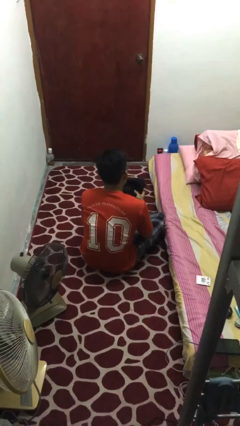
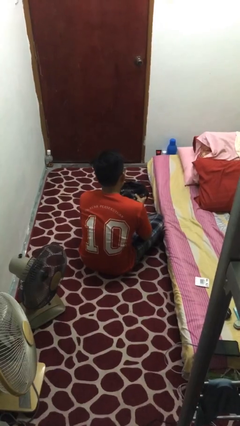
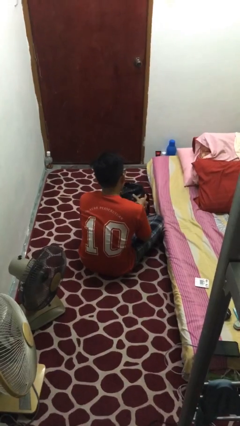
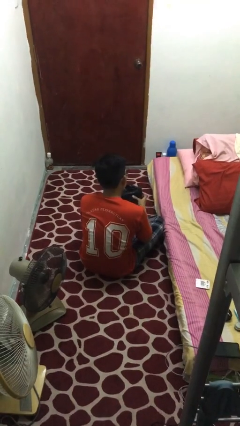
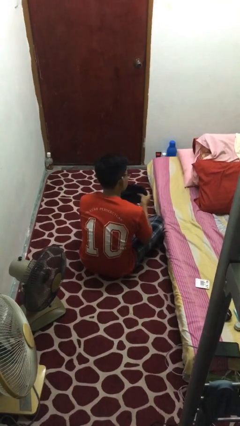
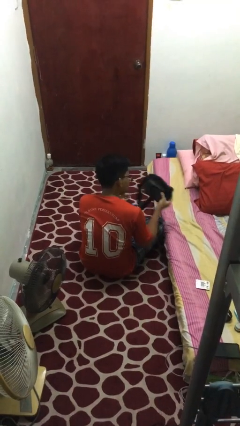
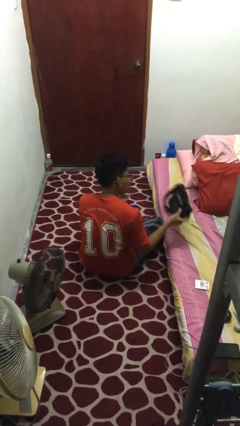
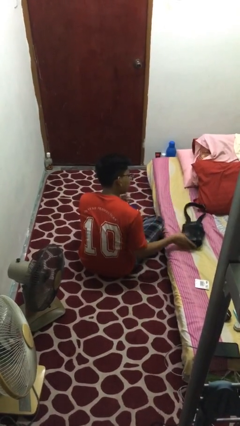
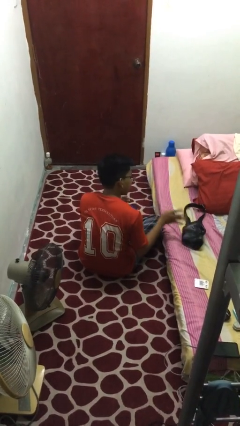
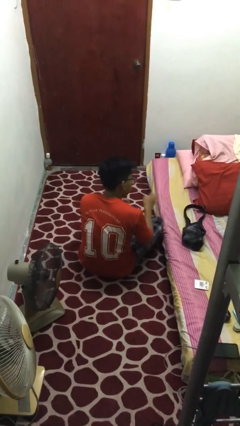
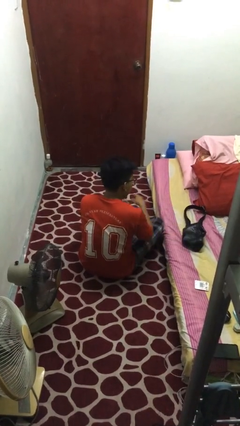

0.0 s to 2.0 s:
person puts down object on bed

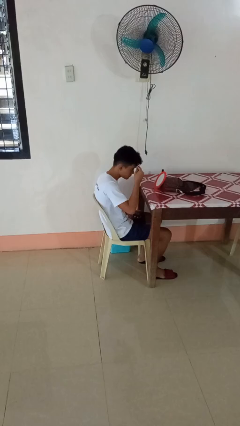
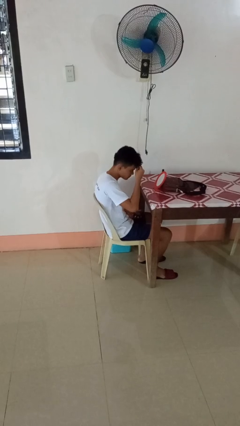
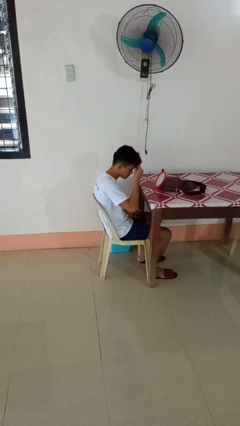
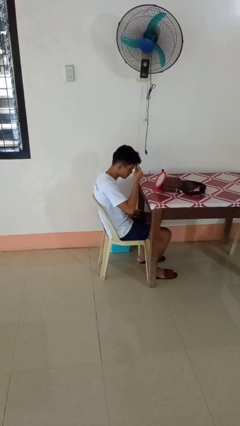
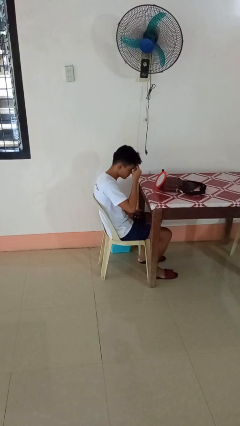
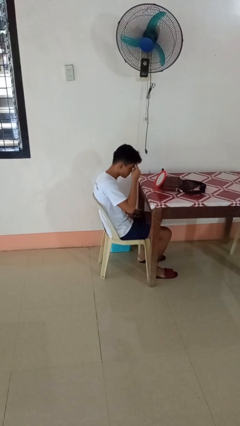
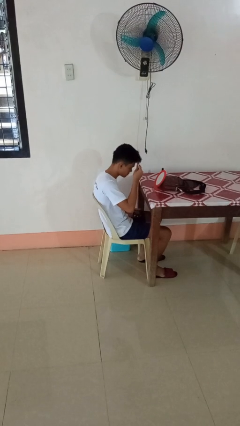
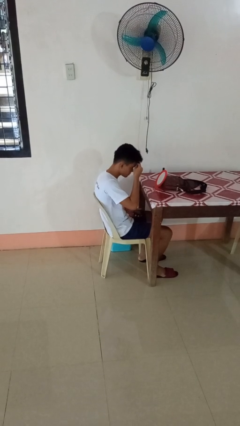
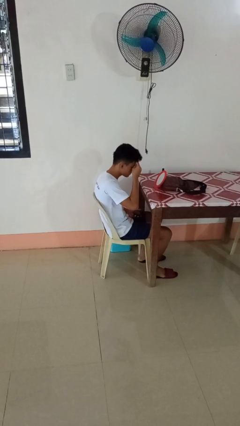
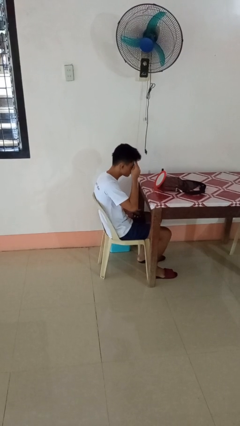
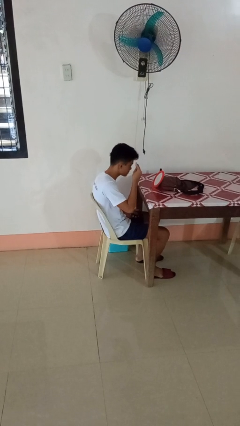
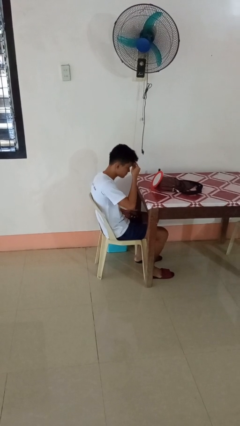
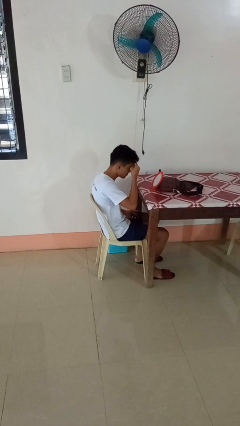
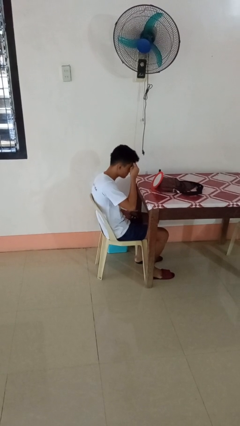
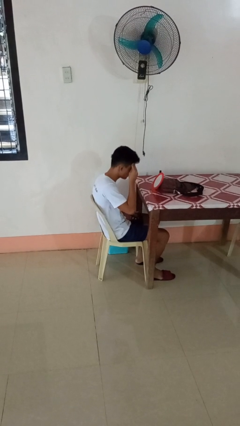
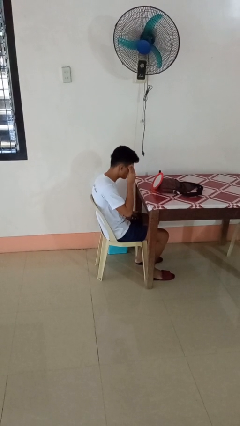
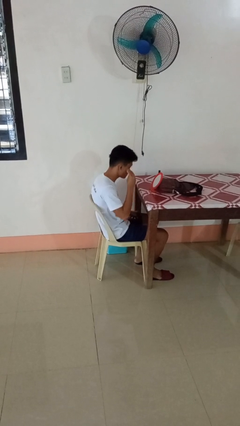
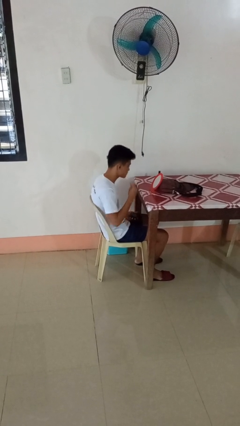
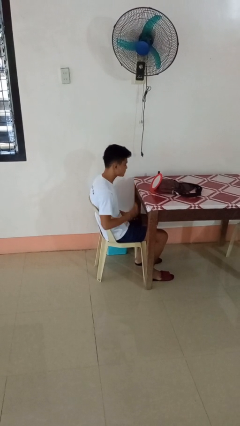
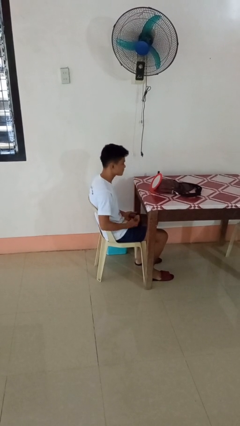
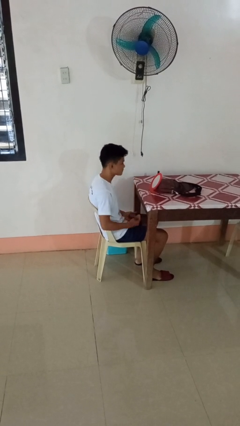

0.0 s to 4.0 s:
person applies foundation makeup

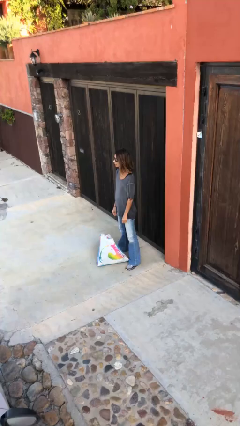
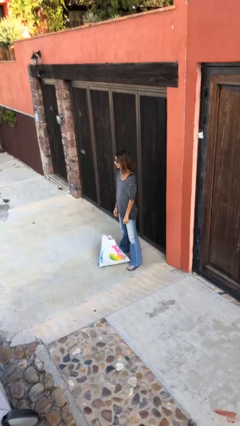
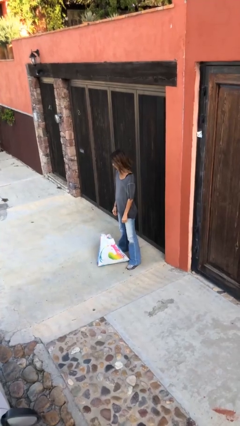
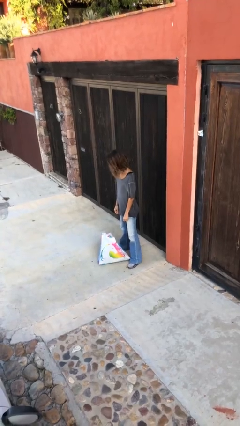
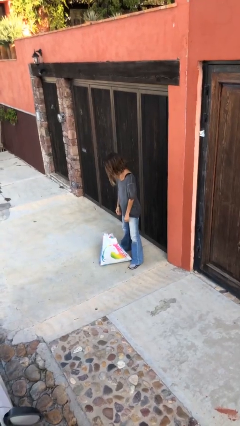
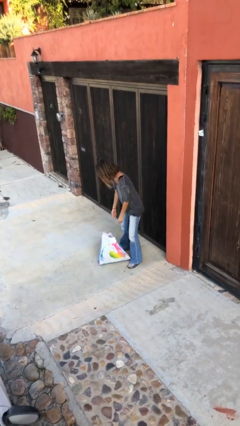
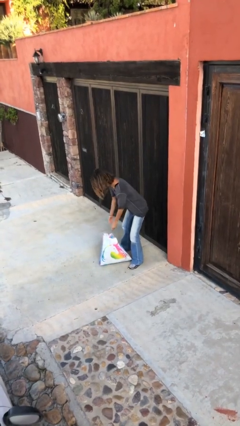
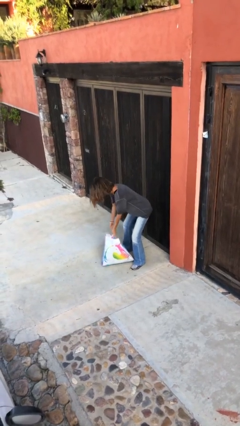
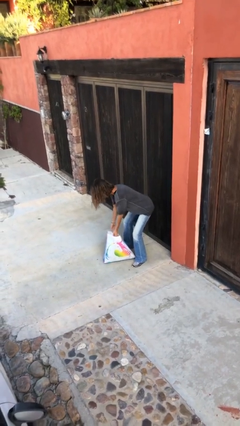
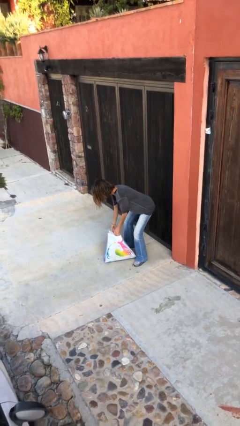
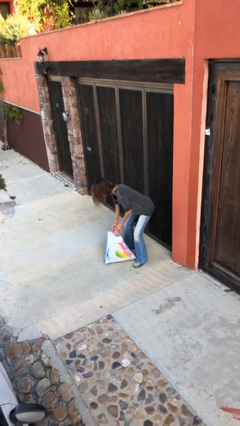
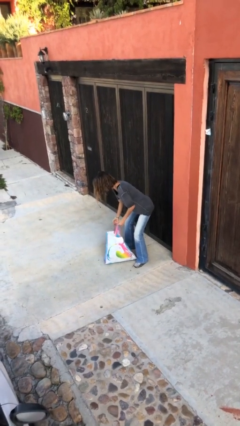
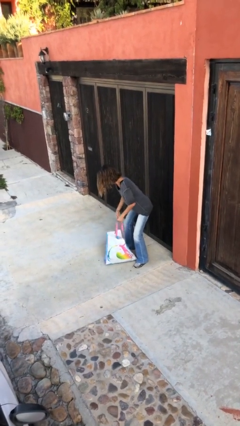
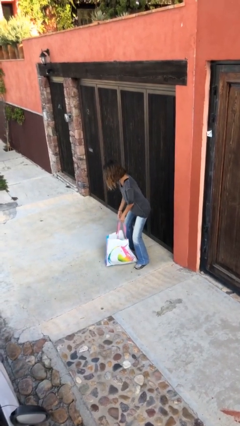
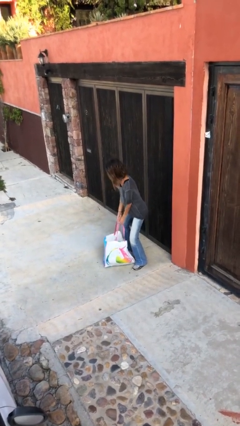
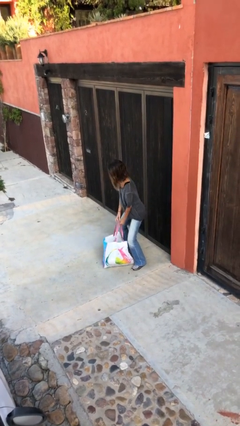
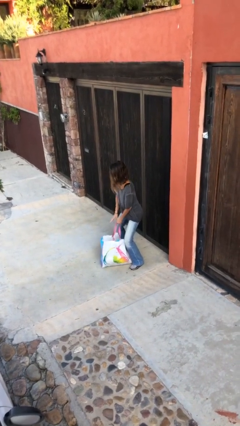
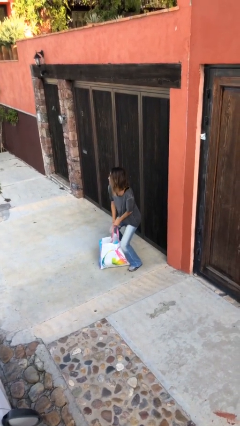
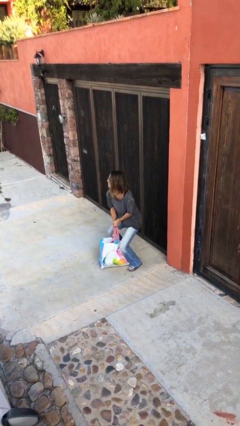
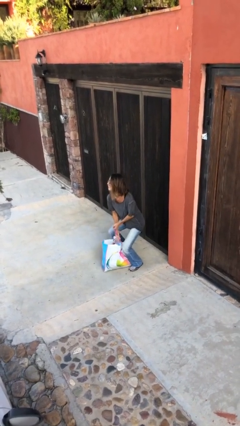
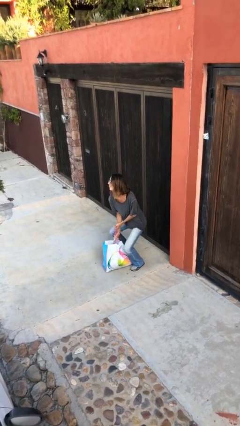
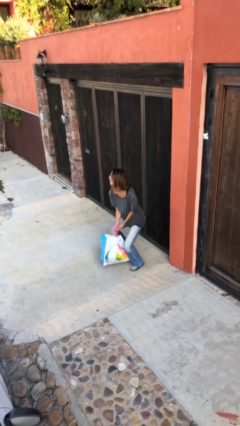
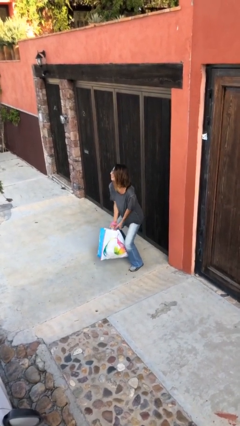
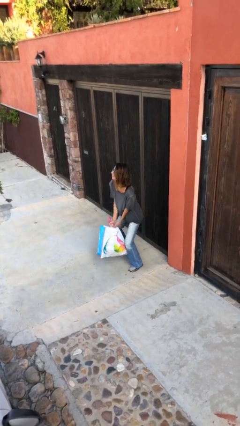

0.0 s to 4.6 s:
person picks up object from floor

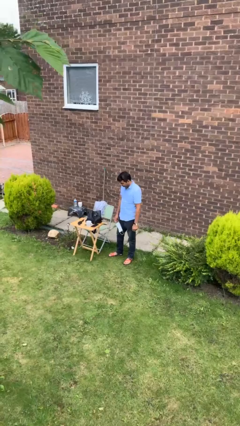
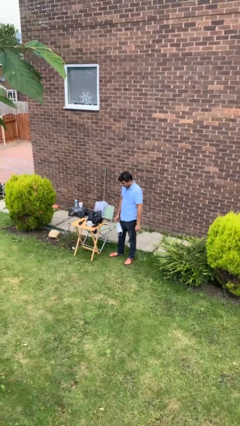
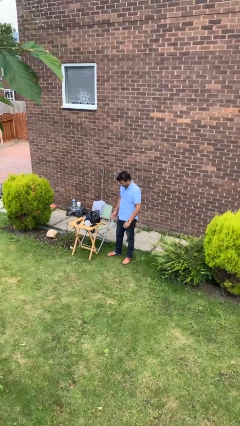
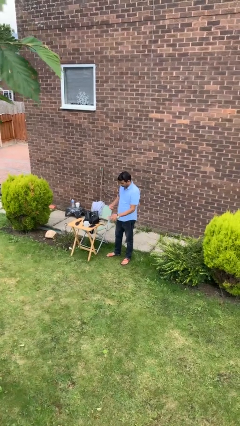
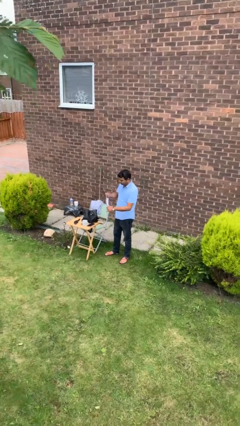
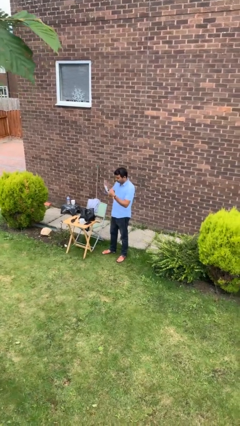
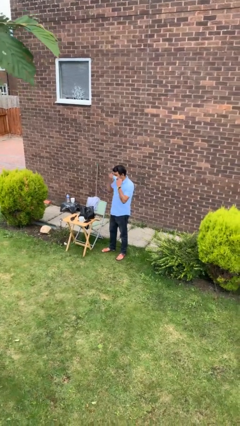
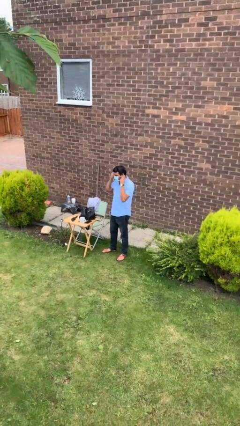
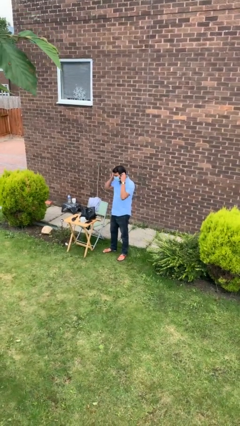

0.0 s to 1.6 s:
person puts on facemask

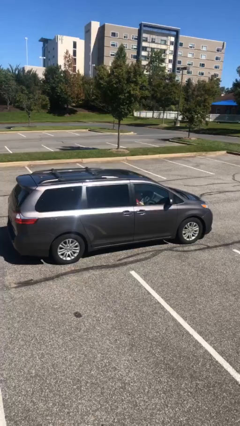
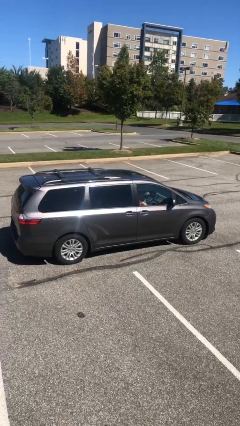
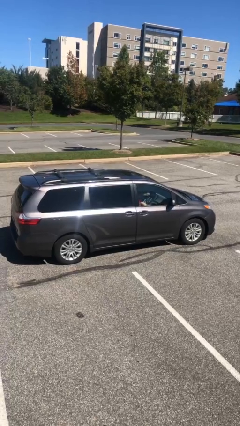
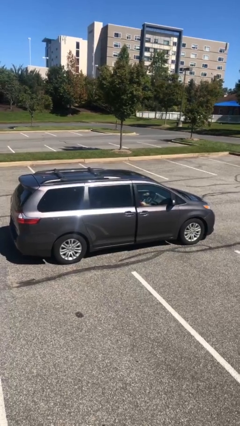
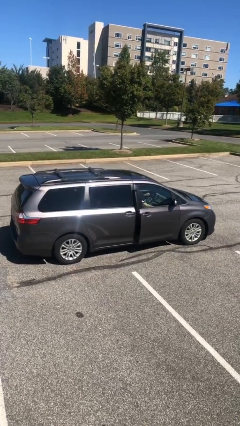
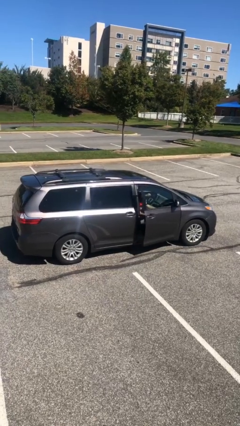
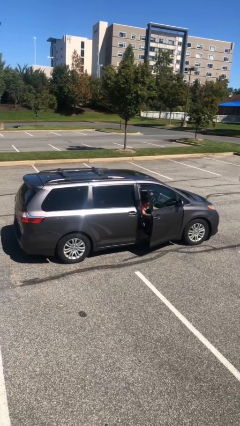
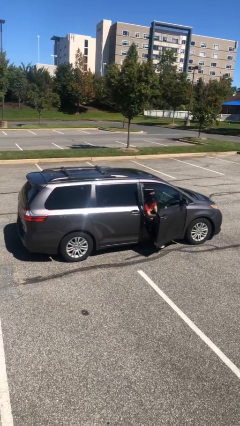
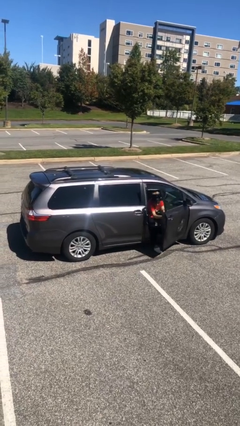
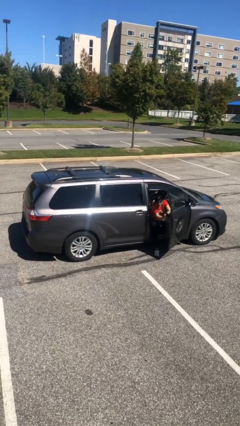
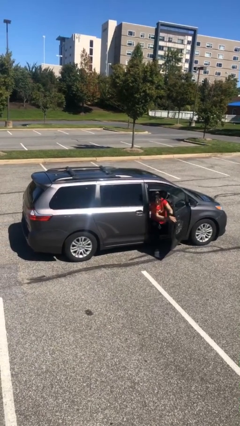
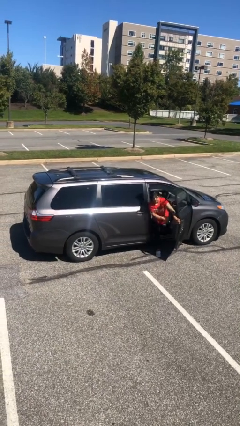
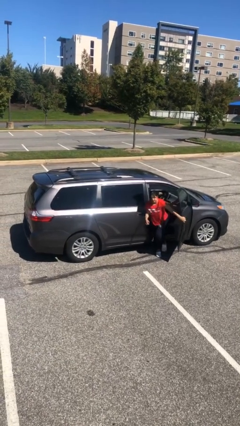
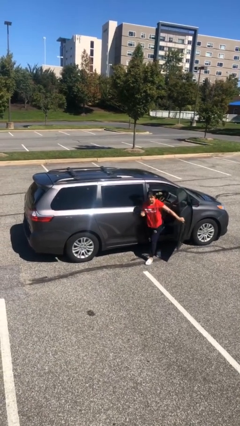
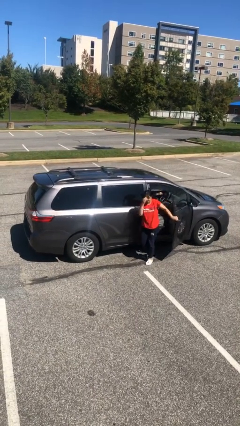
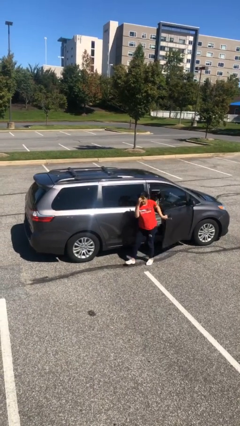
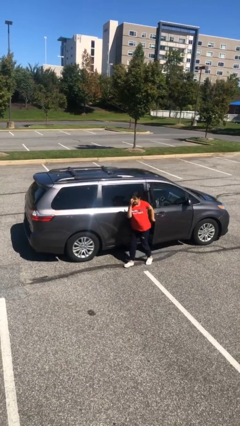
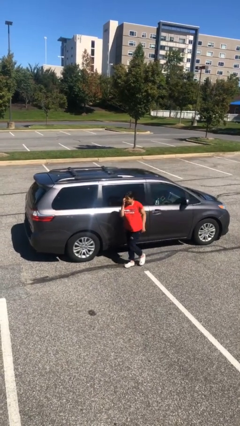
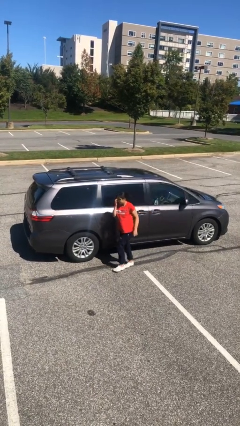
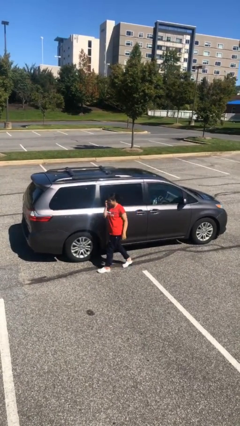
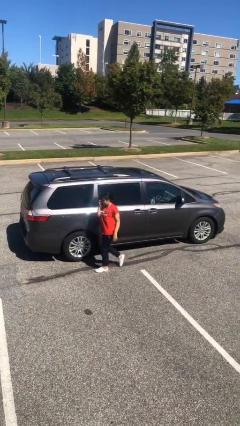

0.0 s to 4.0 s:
car drops off person

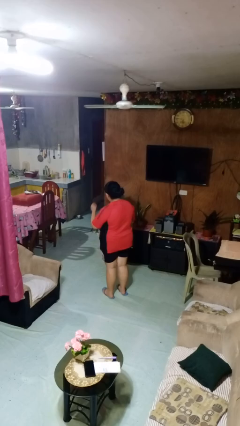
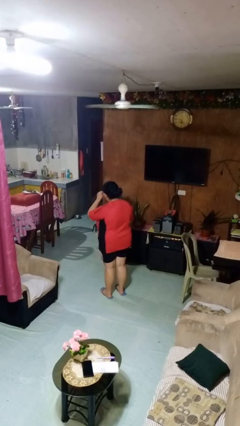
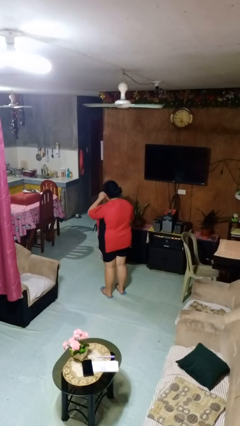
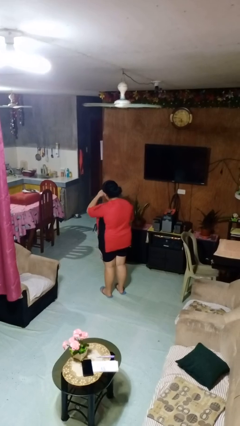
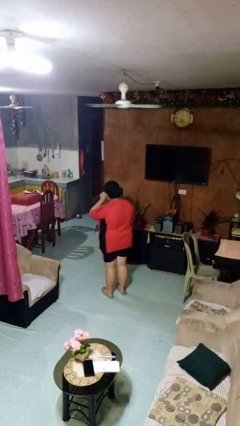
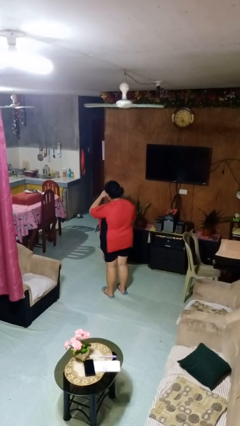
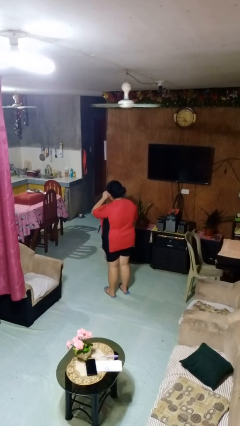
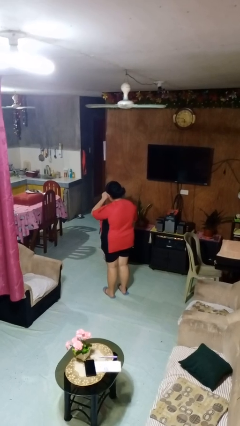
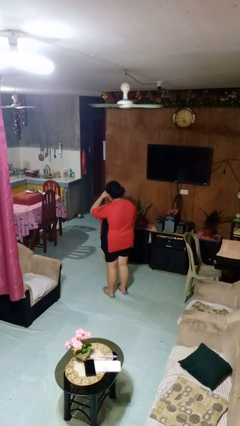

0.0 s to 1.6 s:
person rubs eyes
